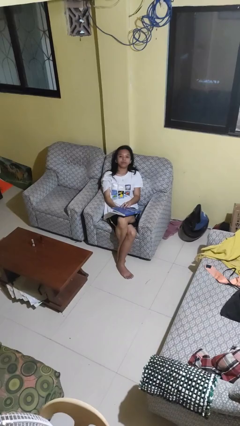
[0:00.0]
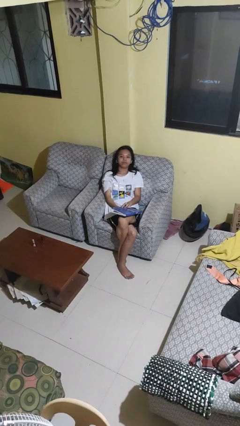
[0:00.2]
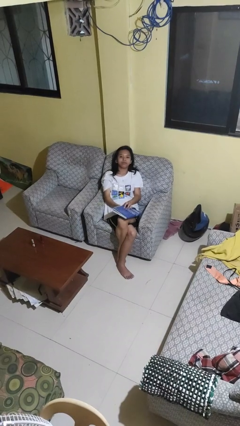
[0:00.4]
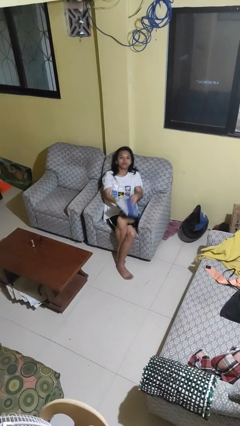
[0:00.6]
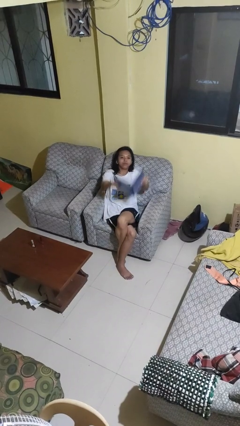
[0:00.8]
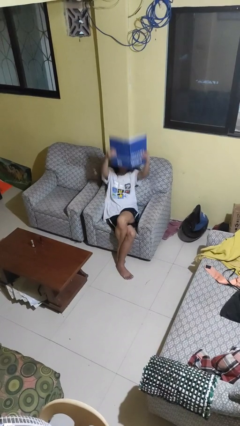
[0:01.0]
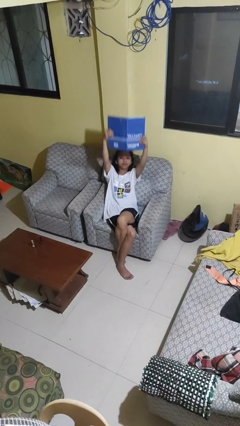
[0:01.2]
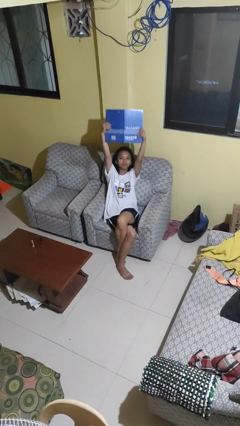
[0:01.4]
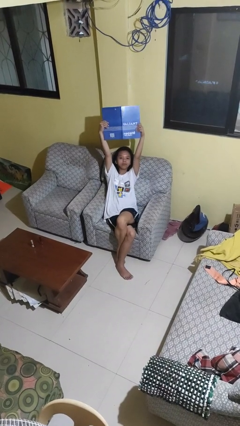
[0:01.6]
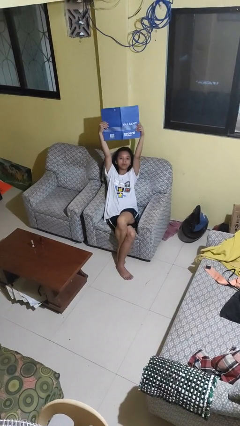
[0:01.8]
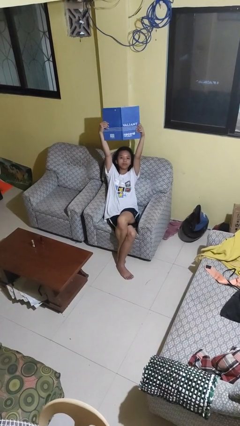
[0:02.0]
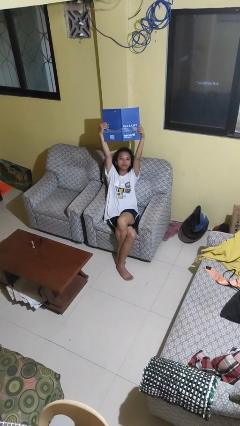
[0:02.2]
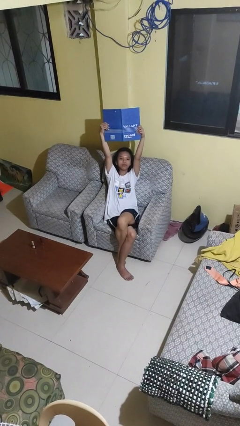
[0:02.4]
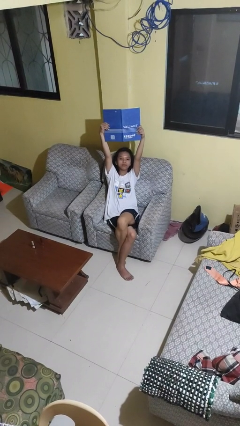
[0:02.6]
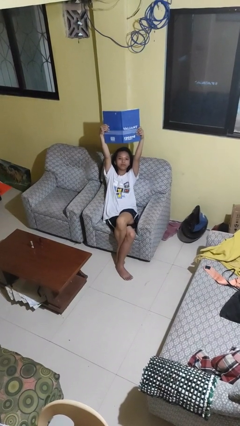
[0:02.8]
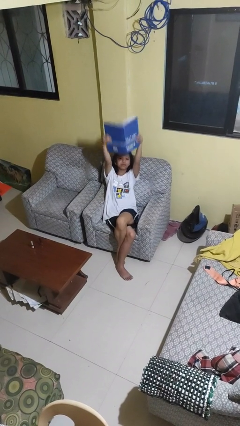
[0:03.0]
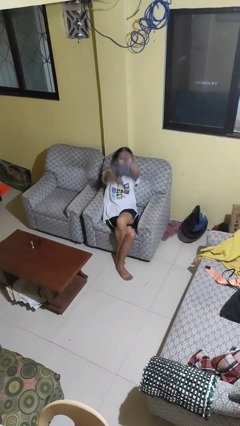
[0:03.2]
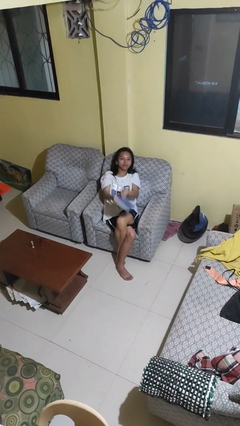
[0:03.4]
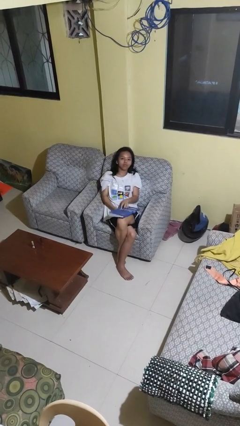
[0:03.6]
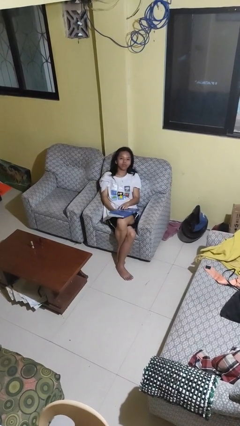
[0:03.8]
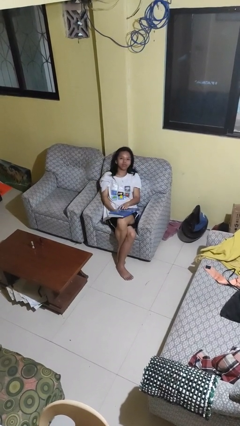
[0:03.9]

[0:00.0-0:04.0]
person holds object above head

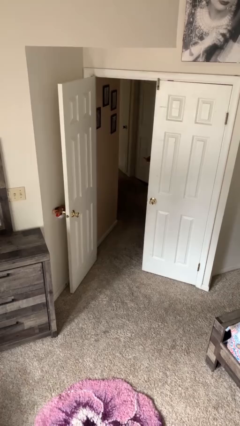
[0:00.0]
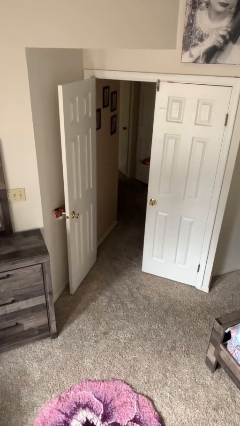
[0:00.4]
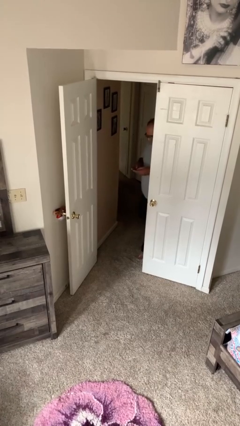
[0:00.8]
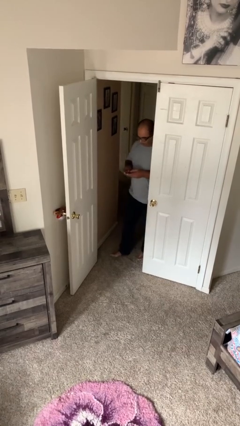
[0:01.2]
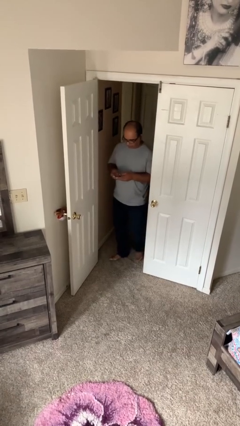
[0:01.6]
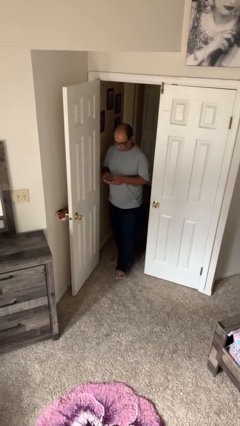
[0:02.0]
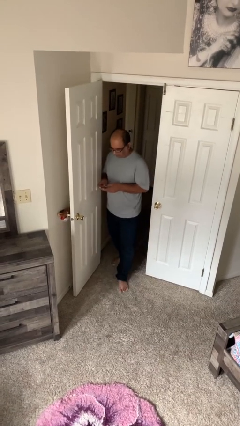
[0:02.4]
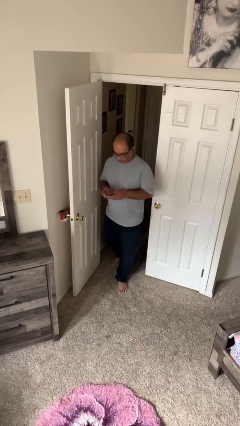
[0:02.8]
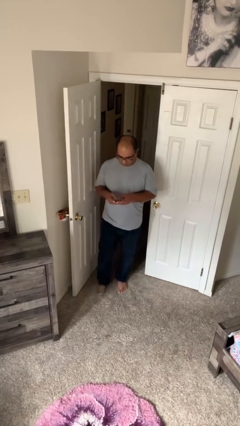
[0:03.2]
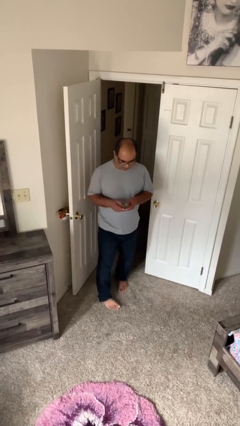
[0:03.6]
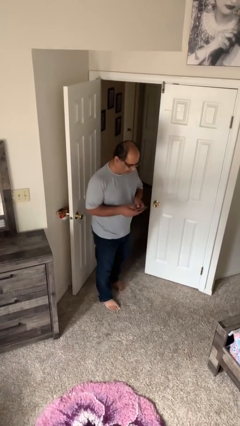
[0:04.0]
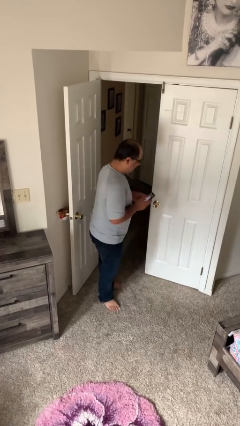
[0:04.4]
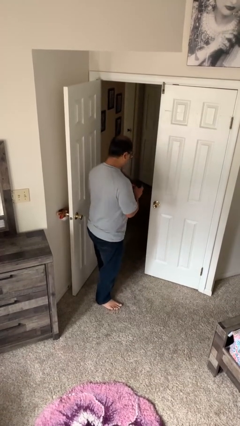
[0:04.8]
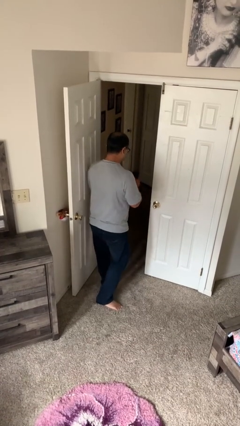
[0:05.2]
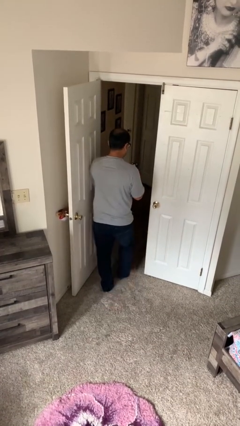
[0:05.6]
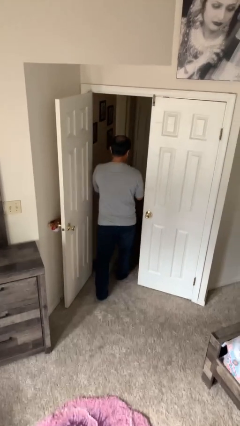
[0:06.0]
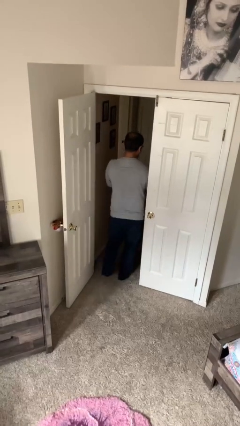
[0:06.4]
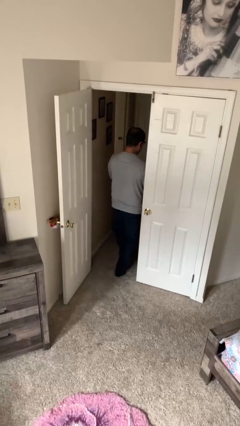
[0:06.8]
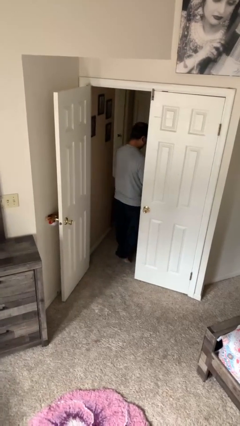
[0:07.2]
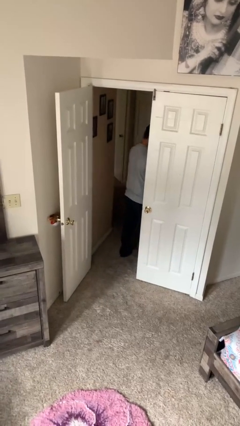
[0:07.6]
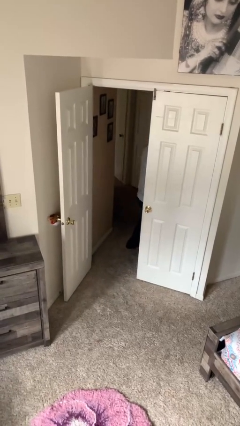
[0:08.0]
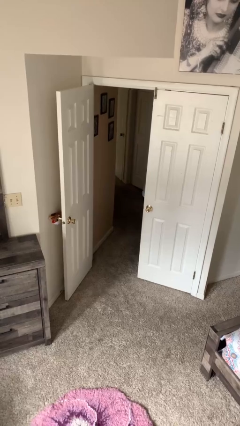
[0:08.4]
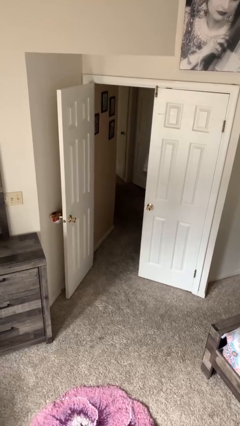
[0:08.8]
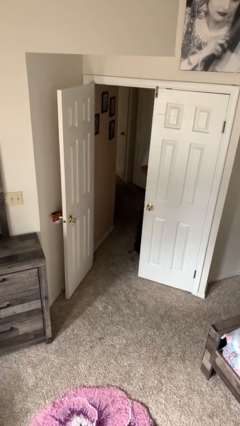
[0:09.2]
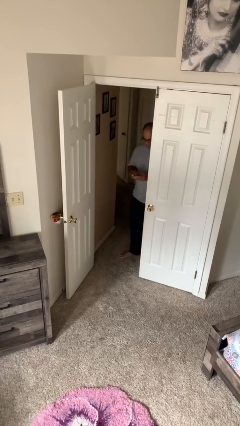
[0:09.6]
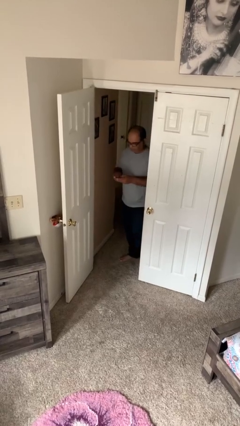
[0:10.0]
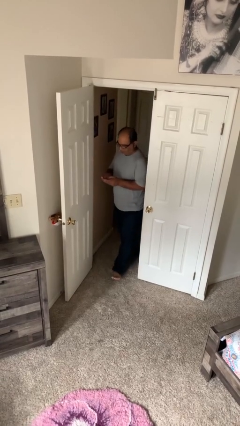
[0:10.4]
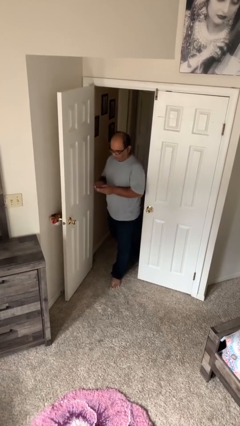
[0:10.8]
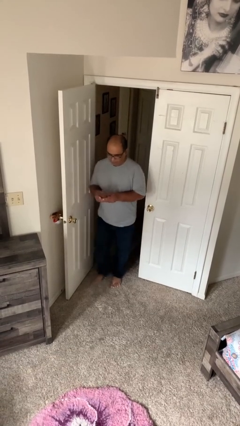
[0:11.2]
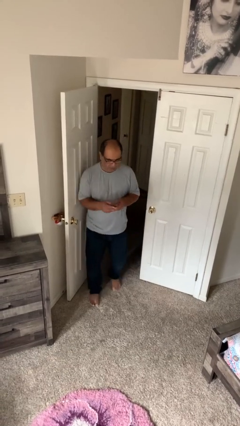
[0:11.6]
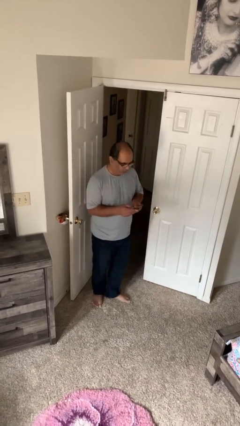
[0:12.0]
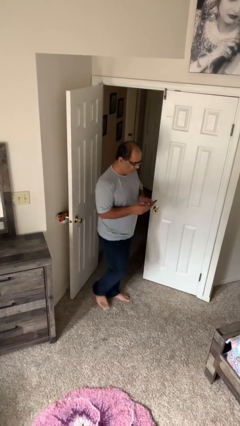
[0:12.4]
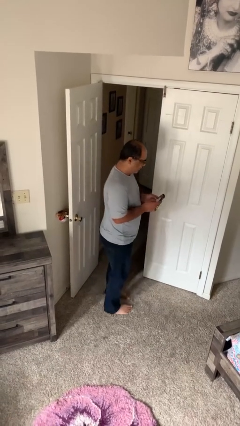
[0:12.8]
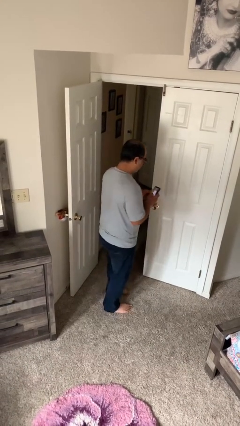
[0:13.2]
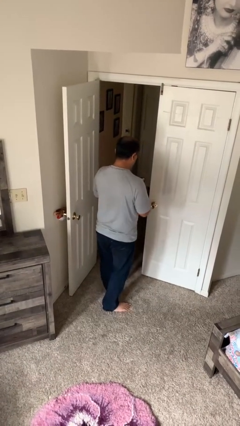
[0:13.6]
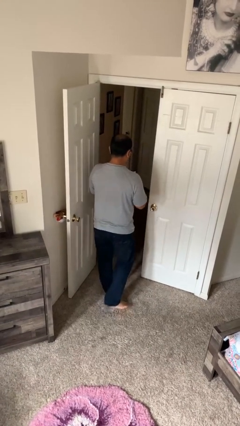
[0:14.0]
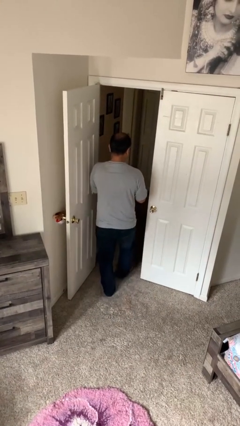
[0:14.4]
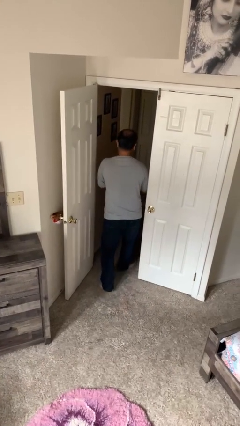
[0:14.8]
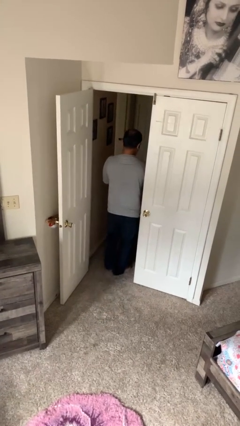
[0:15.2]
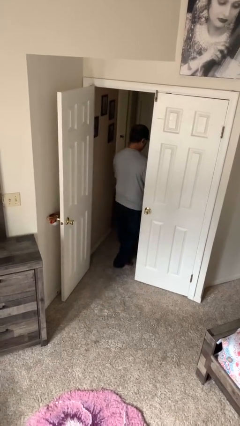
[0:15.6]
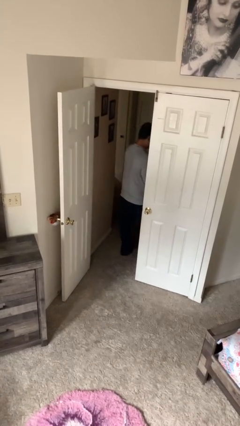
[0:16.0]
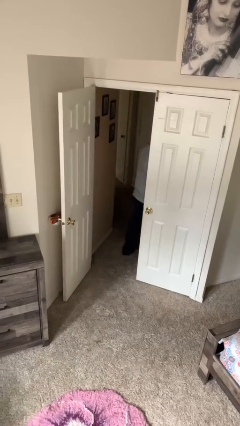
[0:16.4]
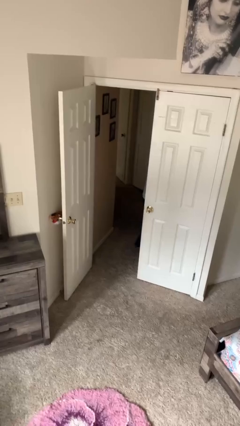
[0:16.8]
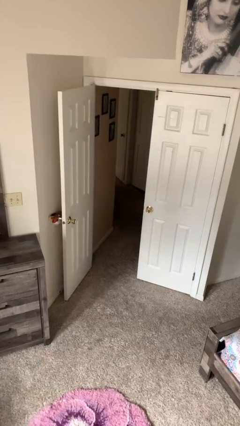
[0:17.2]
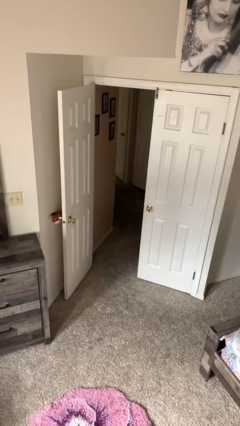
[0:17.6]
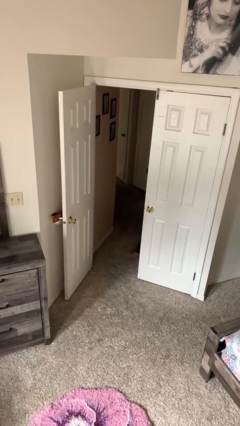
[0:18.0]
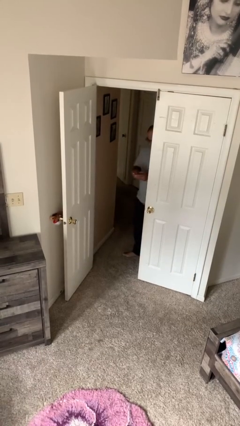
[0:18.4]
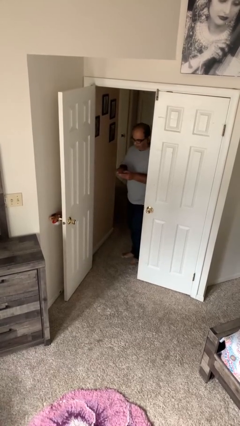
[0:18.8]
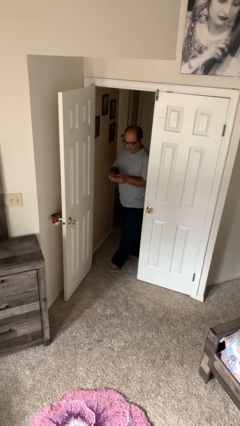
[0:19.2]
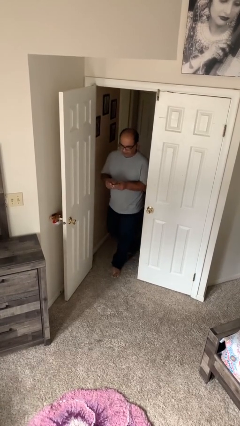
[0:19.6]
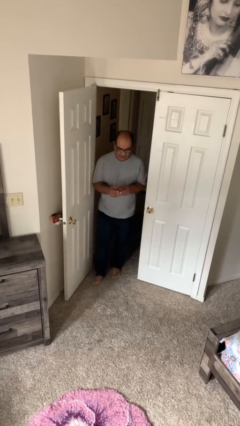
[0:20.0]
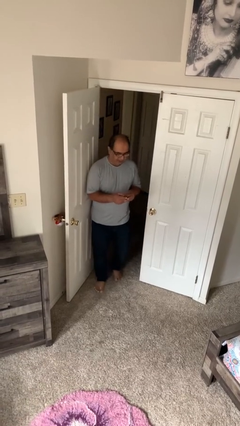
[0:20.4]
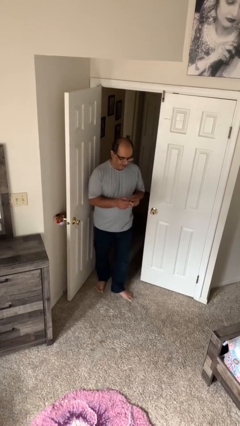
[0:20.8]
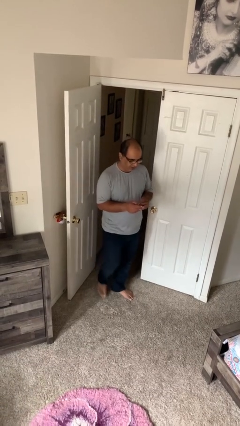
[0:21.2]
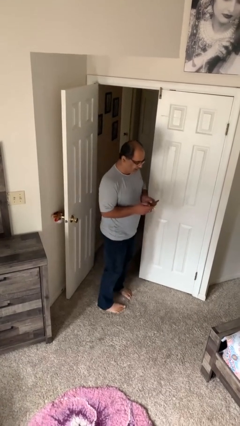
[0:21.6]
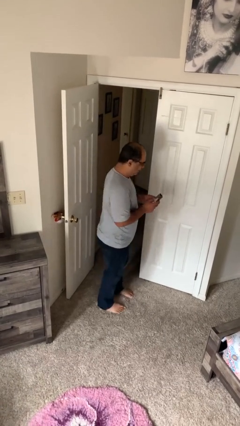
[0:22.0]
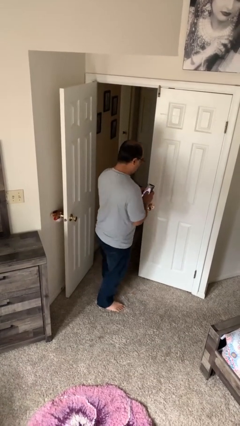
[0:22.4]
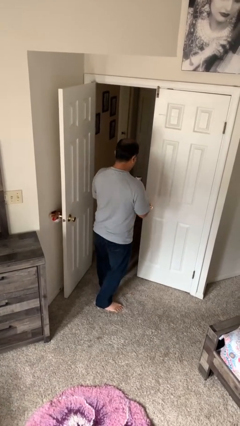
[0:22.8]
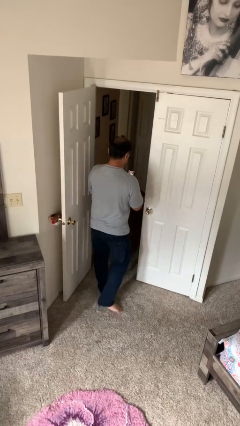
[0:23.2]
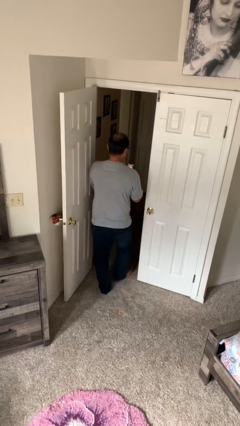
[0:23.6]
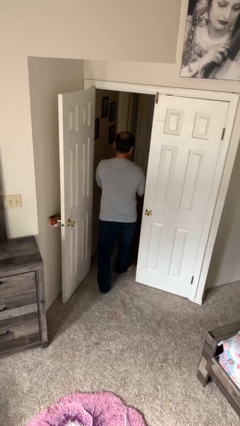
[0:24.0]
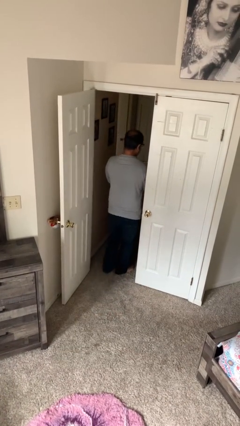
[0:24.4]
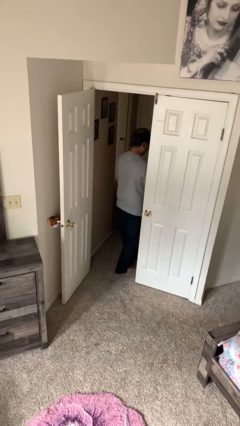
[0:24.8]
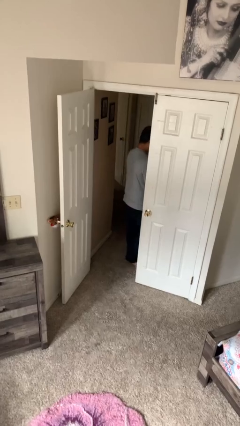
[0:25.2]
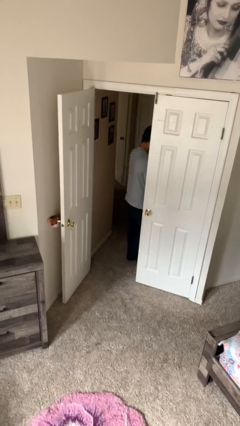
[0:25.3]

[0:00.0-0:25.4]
person texts on phone

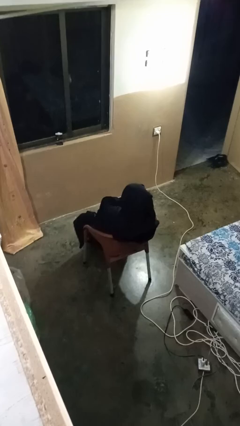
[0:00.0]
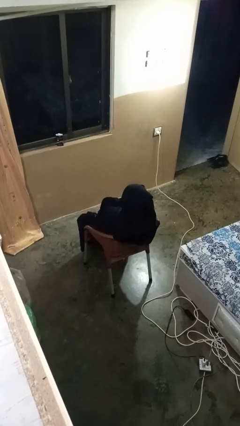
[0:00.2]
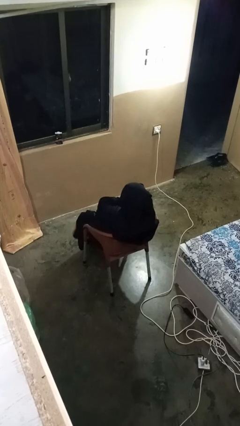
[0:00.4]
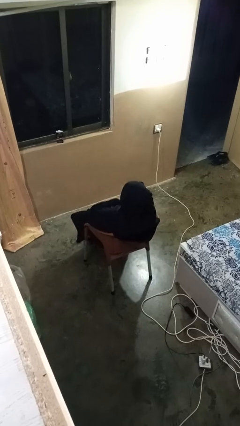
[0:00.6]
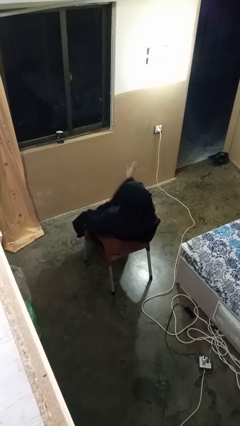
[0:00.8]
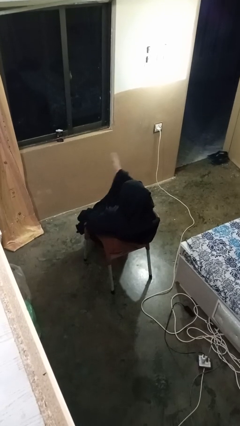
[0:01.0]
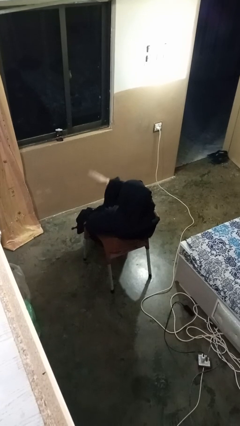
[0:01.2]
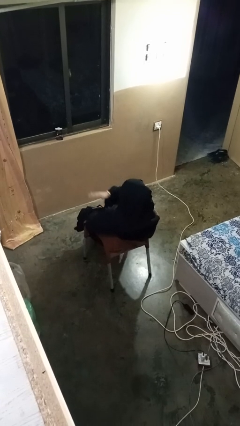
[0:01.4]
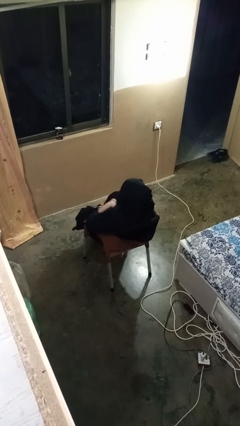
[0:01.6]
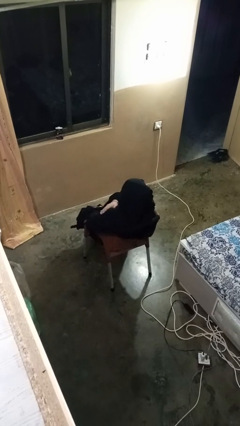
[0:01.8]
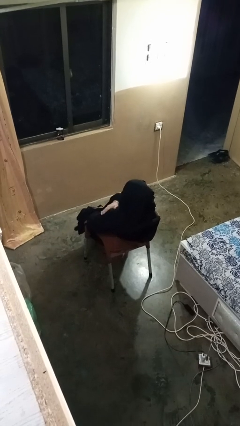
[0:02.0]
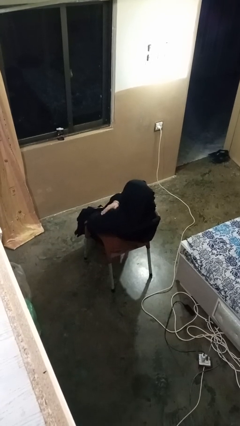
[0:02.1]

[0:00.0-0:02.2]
person gestures swipe left
